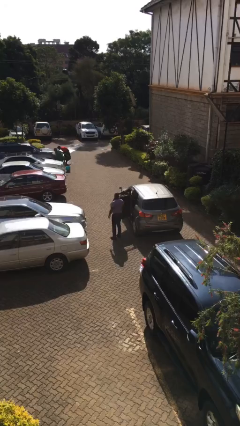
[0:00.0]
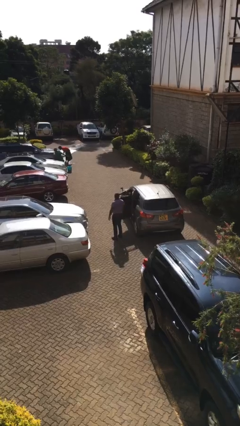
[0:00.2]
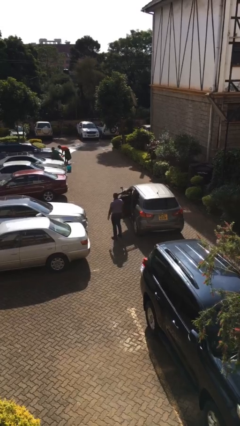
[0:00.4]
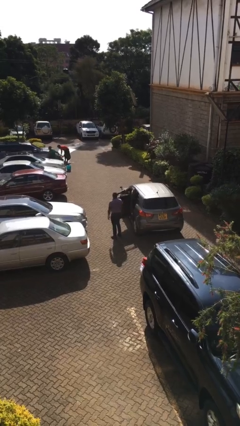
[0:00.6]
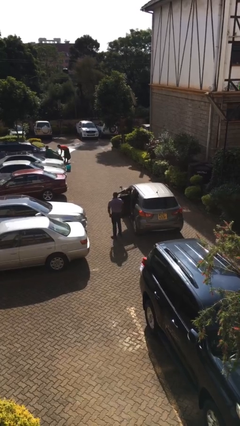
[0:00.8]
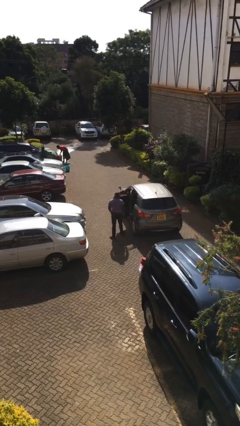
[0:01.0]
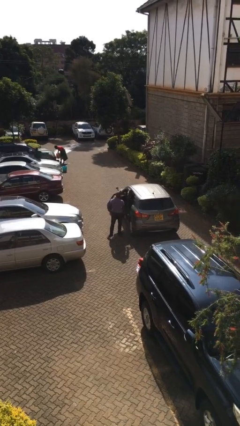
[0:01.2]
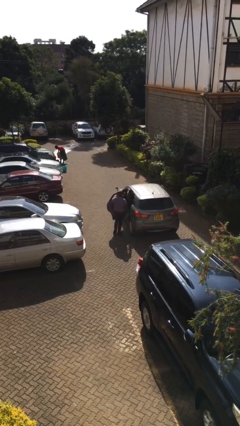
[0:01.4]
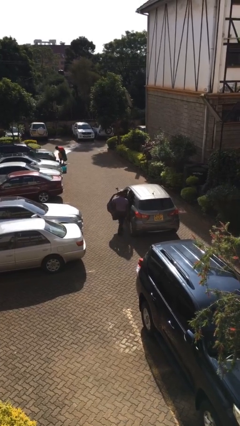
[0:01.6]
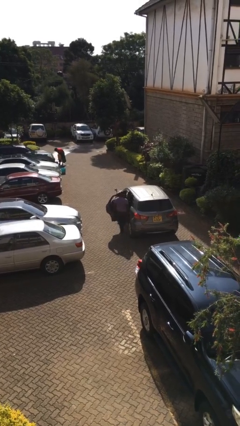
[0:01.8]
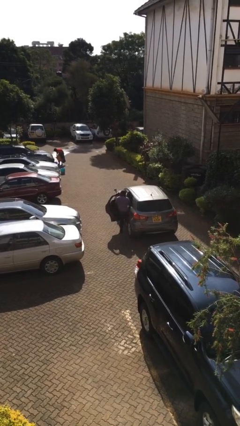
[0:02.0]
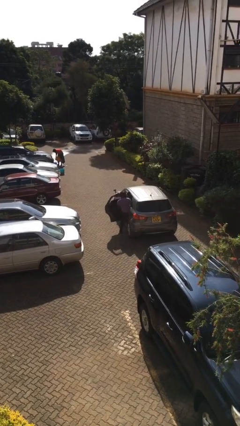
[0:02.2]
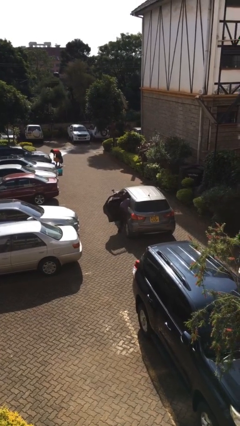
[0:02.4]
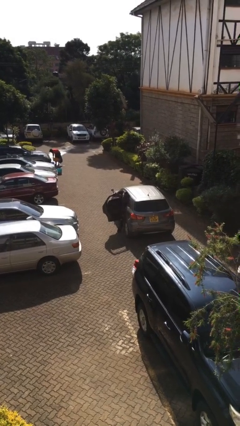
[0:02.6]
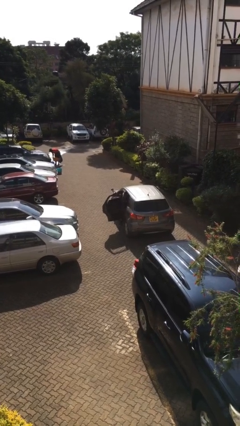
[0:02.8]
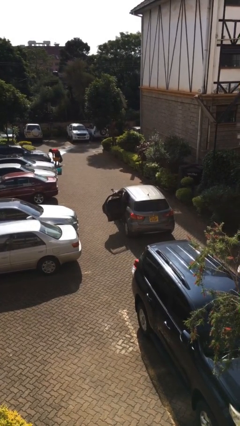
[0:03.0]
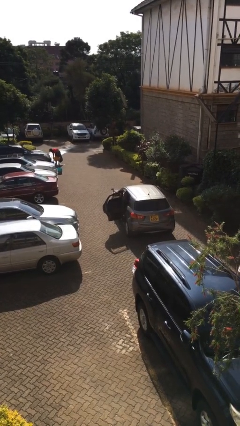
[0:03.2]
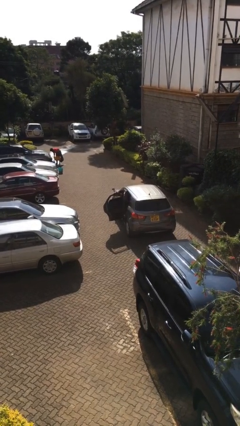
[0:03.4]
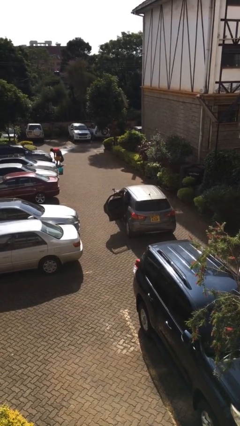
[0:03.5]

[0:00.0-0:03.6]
person enters car

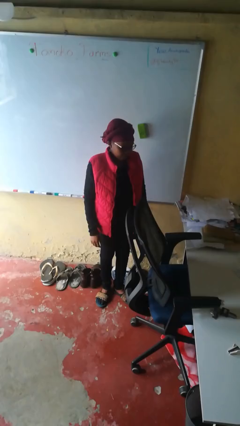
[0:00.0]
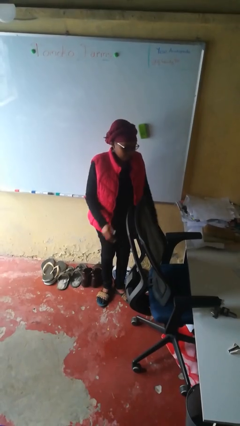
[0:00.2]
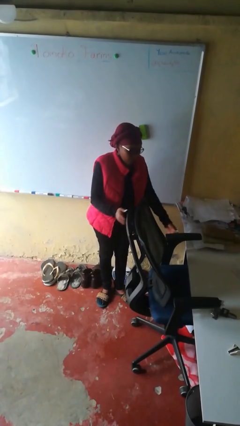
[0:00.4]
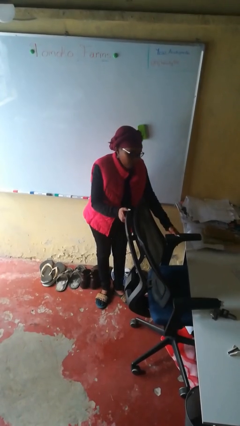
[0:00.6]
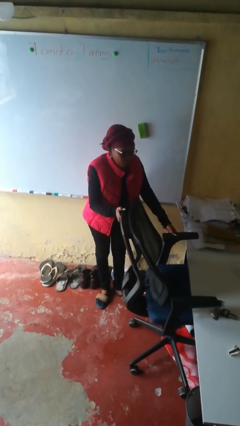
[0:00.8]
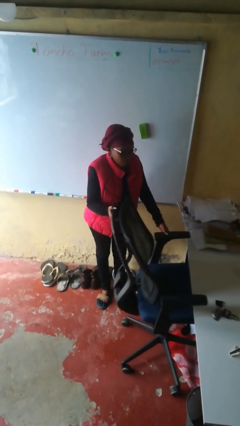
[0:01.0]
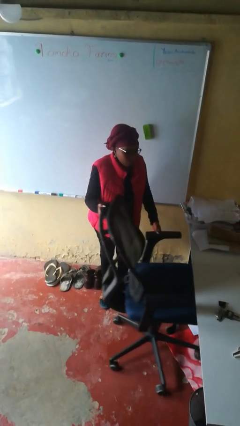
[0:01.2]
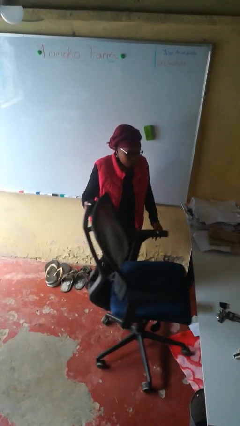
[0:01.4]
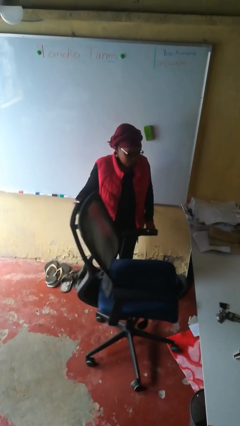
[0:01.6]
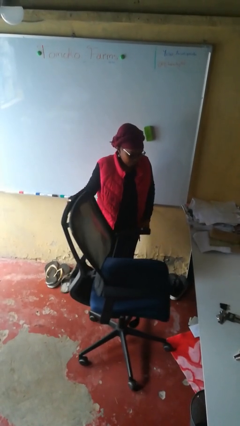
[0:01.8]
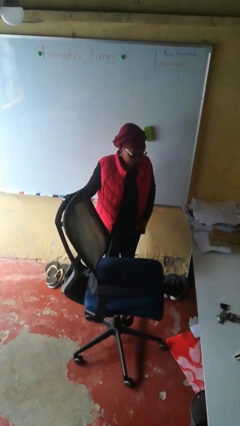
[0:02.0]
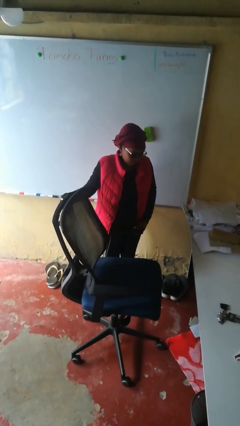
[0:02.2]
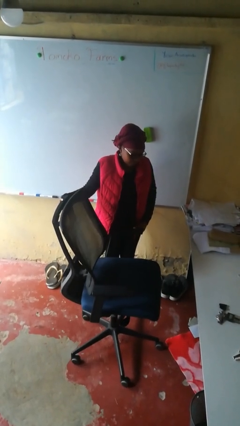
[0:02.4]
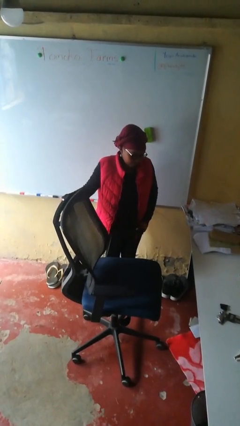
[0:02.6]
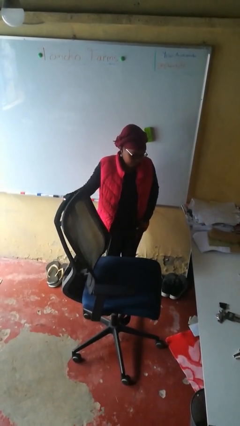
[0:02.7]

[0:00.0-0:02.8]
person pulls out chair

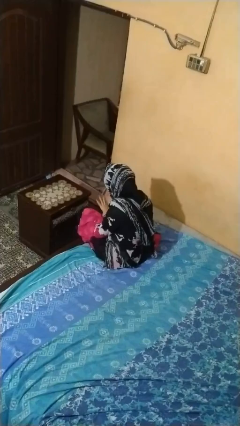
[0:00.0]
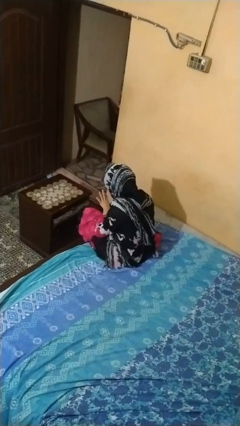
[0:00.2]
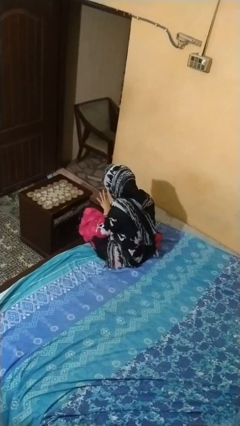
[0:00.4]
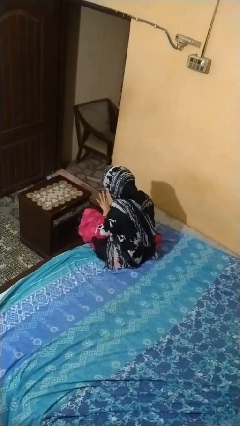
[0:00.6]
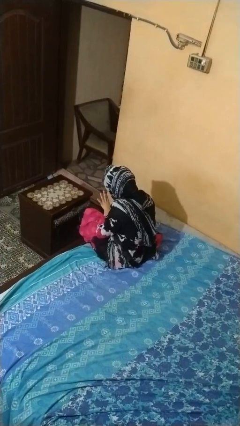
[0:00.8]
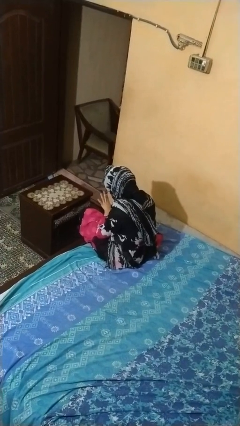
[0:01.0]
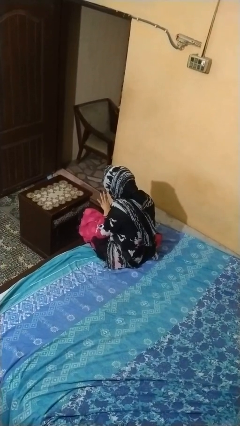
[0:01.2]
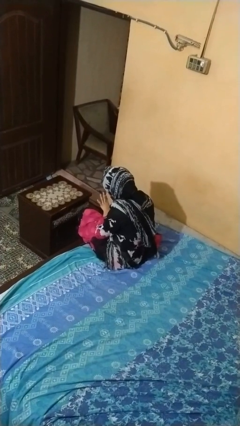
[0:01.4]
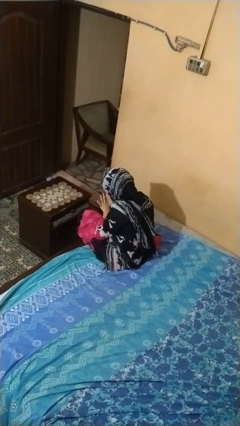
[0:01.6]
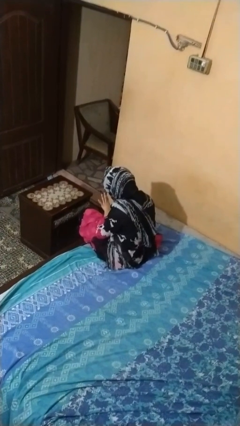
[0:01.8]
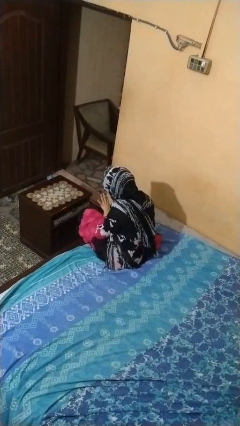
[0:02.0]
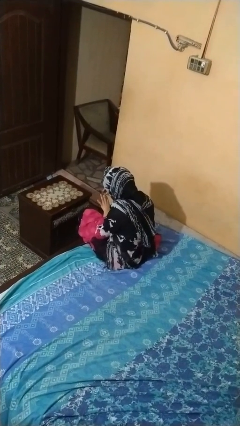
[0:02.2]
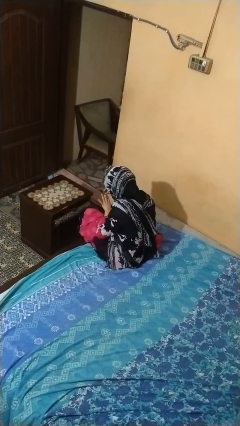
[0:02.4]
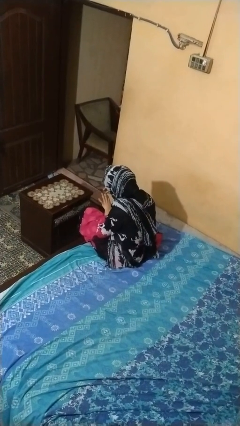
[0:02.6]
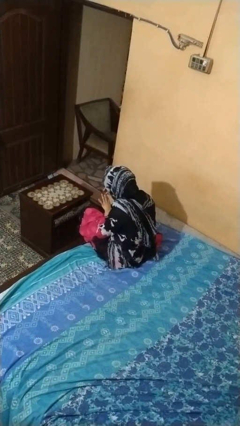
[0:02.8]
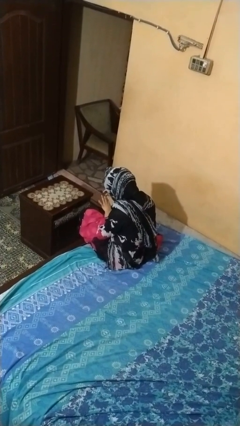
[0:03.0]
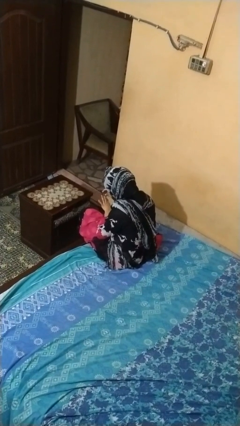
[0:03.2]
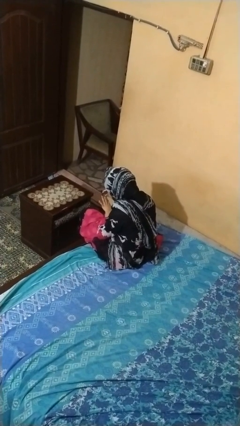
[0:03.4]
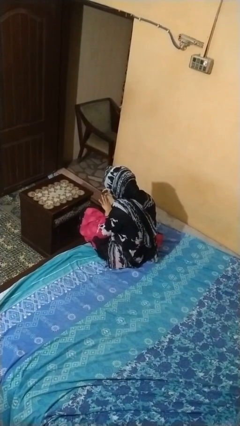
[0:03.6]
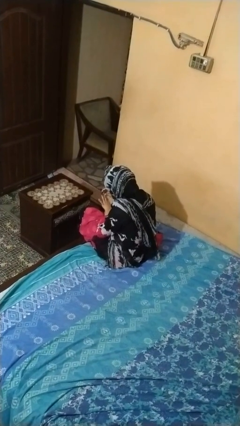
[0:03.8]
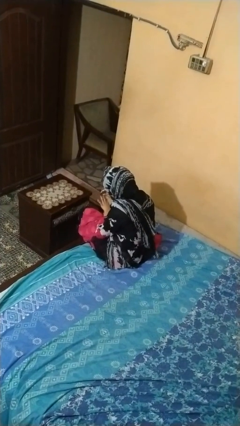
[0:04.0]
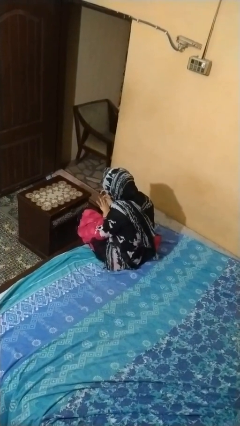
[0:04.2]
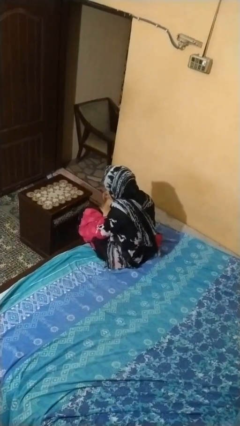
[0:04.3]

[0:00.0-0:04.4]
person clips fingernails

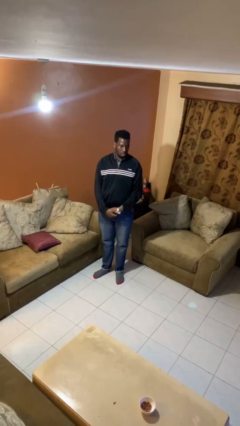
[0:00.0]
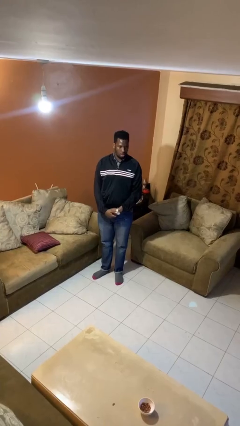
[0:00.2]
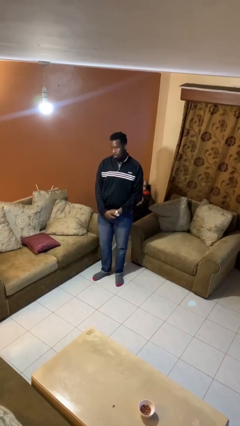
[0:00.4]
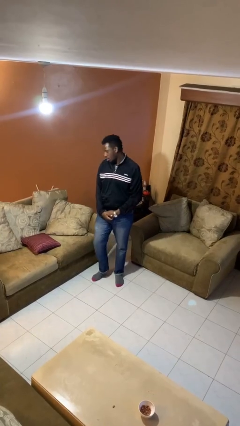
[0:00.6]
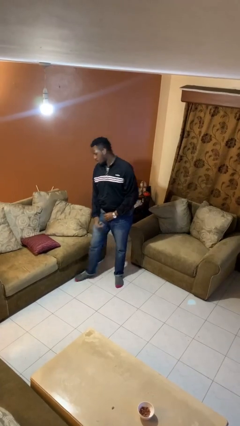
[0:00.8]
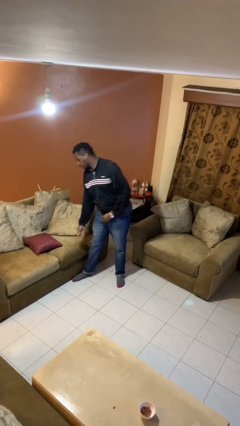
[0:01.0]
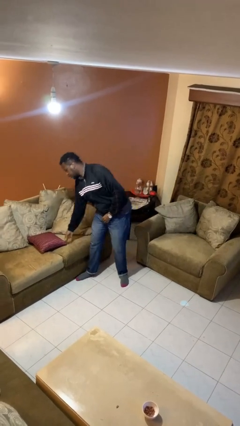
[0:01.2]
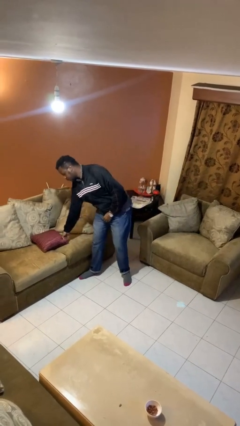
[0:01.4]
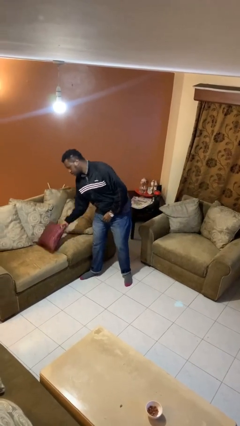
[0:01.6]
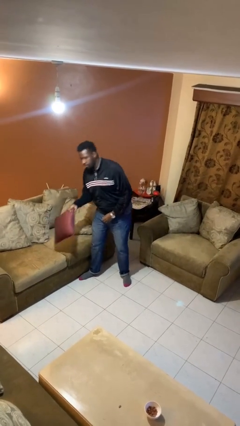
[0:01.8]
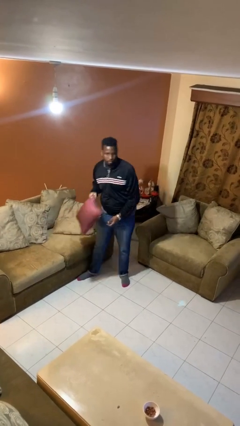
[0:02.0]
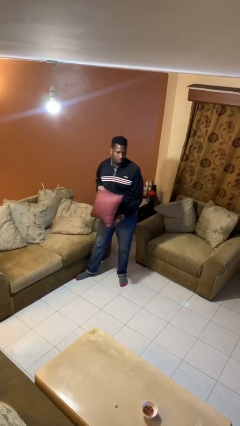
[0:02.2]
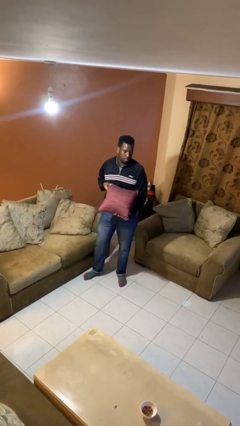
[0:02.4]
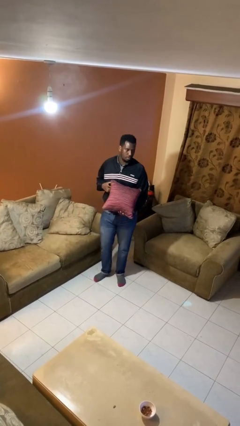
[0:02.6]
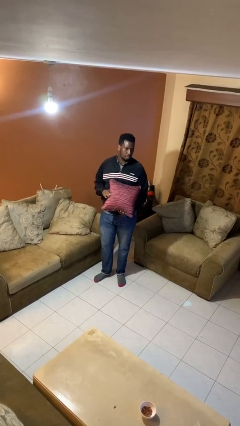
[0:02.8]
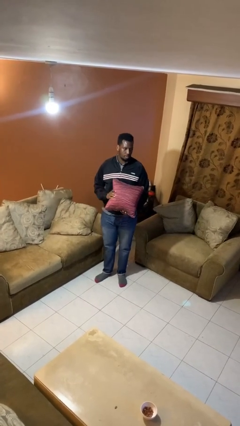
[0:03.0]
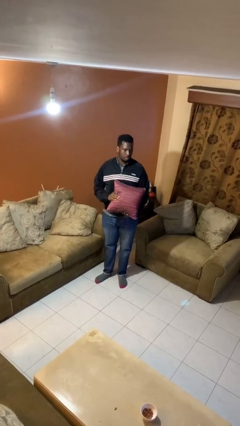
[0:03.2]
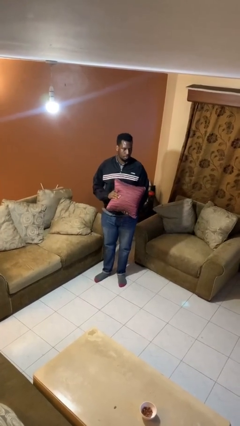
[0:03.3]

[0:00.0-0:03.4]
person picks up object from couch

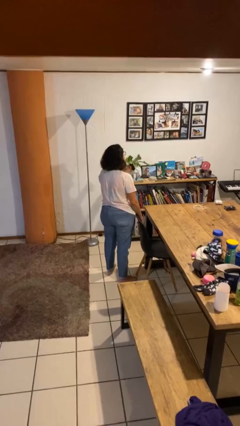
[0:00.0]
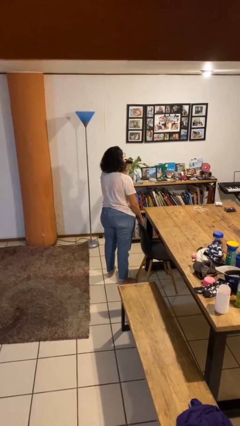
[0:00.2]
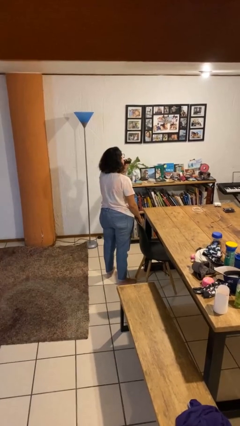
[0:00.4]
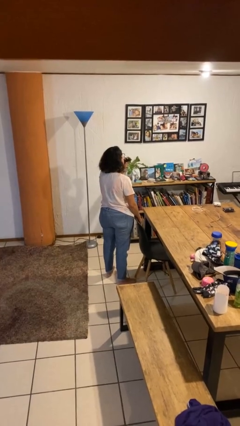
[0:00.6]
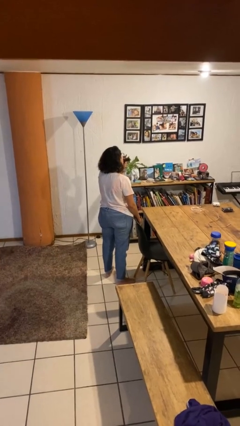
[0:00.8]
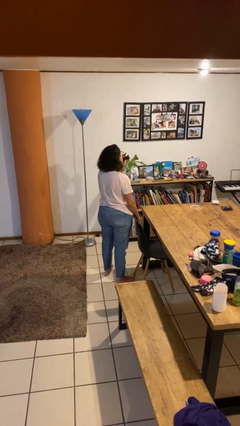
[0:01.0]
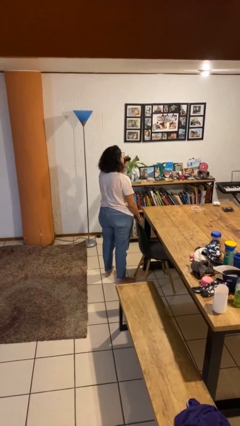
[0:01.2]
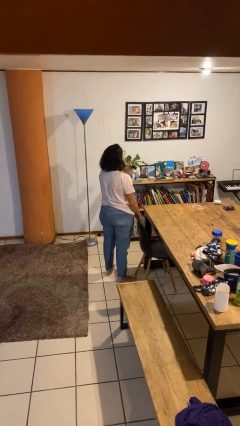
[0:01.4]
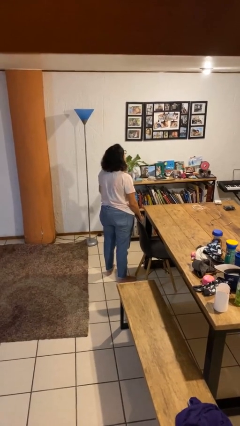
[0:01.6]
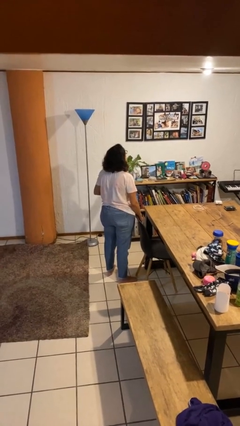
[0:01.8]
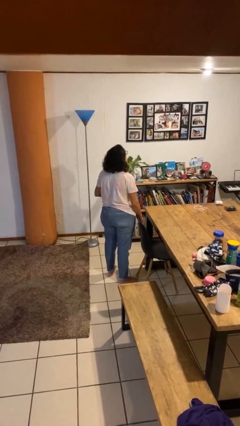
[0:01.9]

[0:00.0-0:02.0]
person vapes

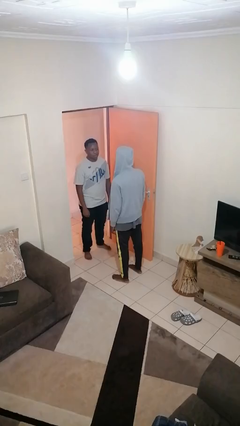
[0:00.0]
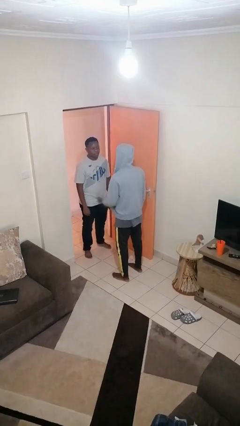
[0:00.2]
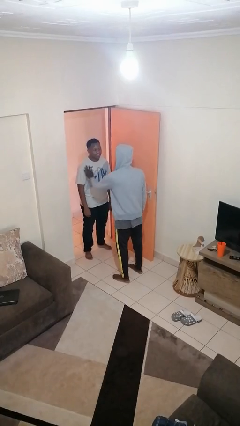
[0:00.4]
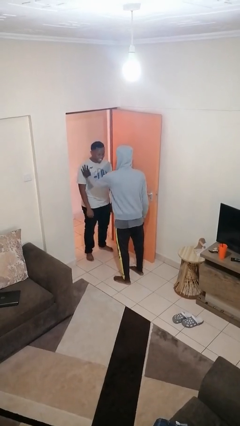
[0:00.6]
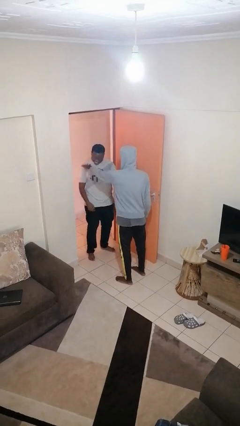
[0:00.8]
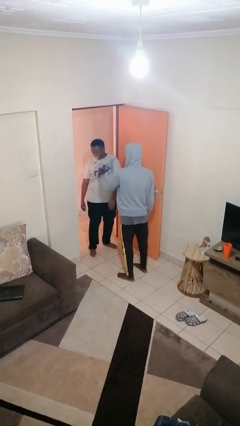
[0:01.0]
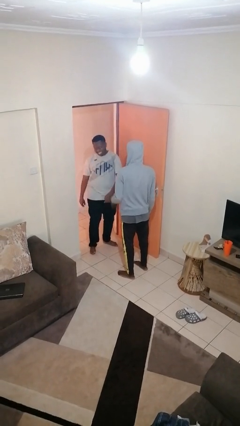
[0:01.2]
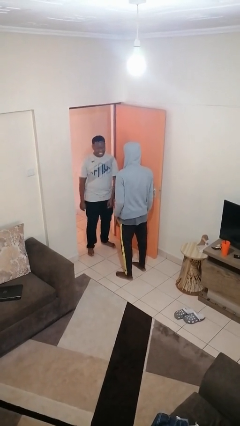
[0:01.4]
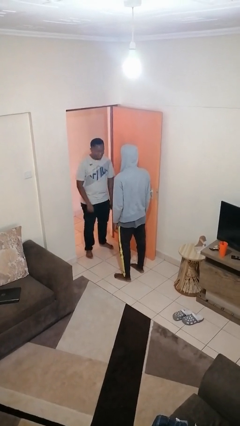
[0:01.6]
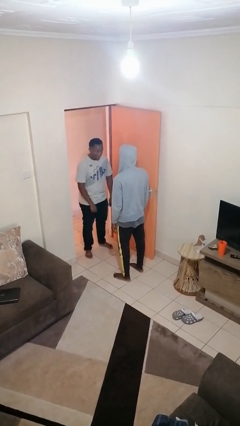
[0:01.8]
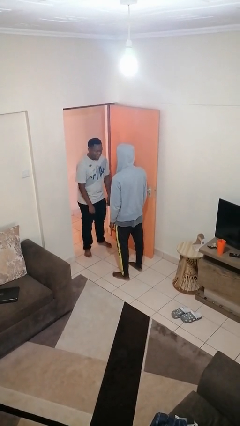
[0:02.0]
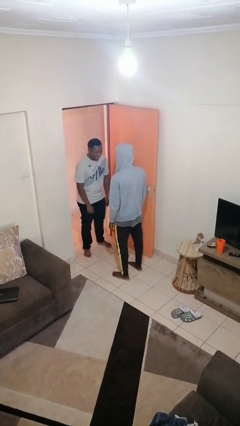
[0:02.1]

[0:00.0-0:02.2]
person shoves person
